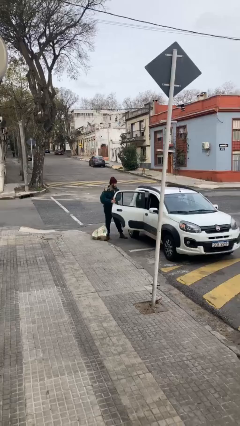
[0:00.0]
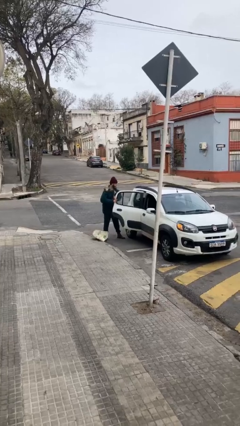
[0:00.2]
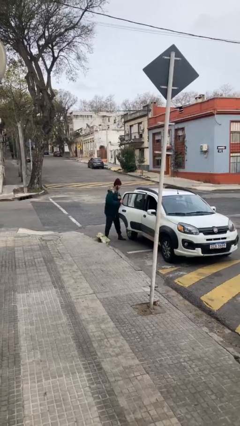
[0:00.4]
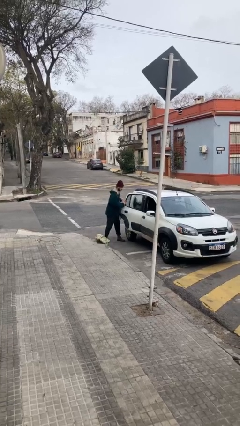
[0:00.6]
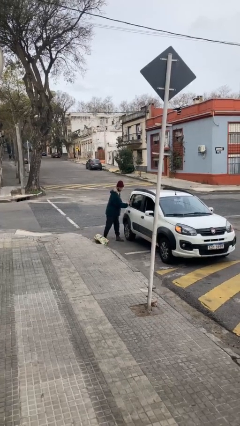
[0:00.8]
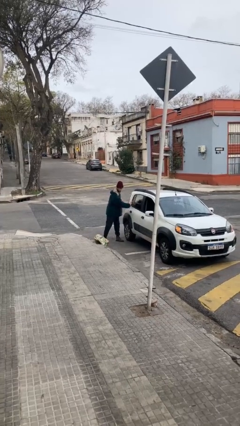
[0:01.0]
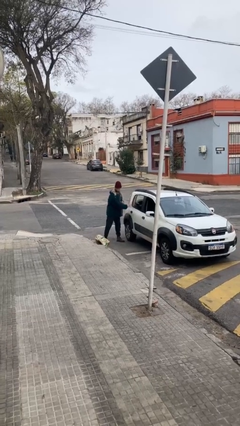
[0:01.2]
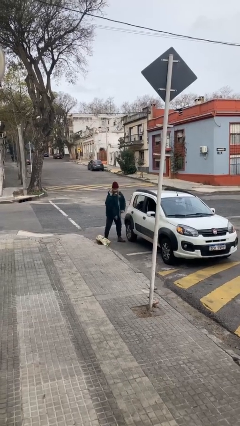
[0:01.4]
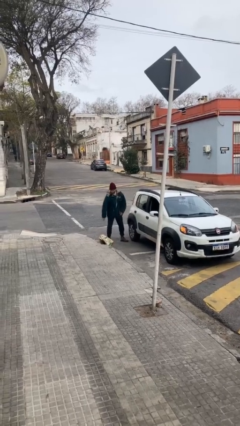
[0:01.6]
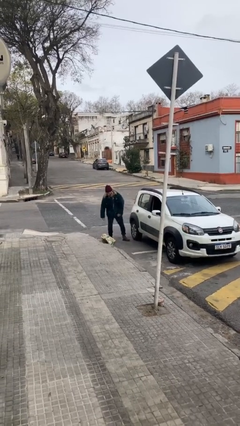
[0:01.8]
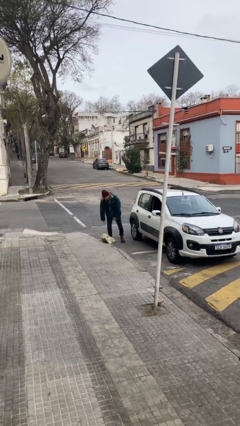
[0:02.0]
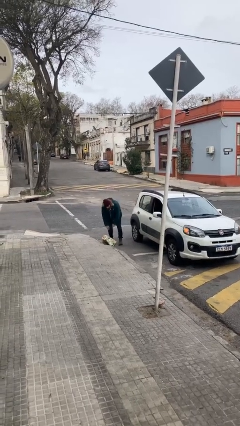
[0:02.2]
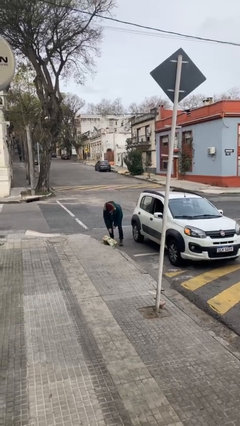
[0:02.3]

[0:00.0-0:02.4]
person closes car door

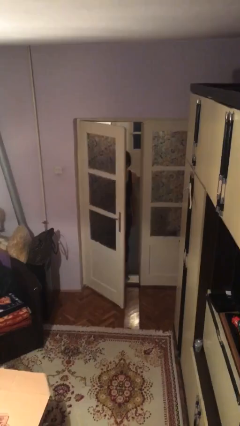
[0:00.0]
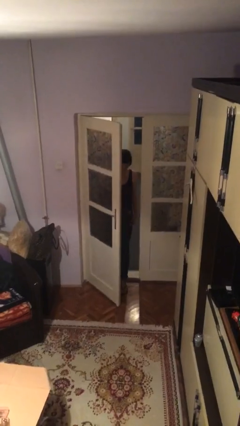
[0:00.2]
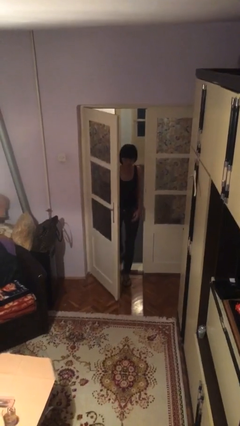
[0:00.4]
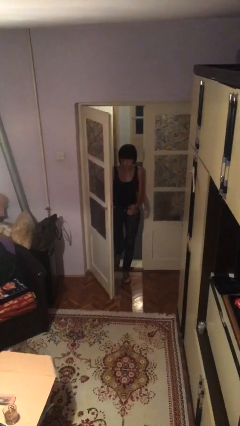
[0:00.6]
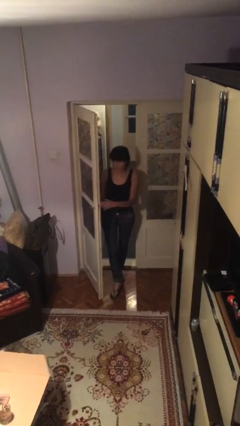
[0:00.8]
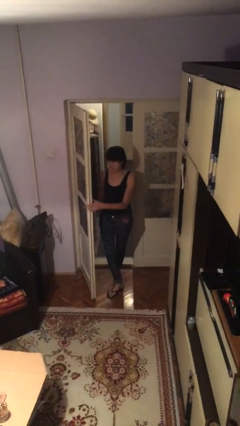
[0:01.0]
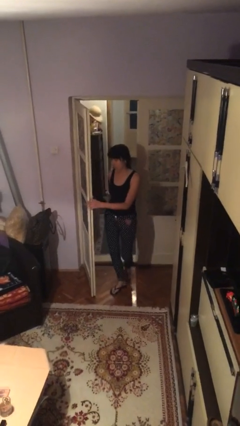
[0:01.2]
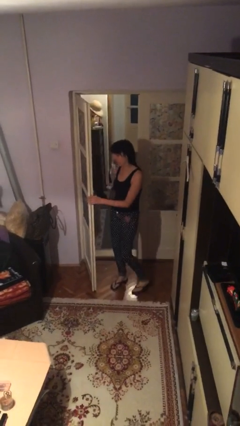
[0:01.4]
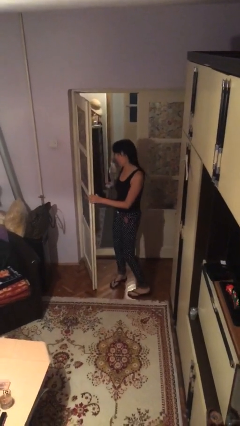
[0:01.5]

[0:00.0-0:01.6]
person enters scene through structure

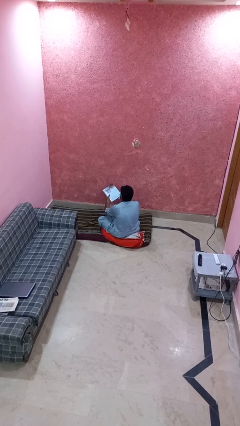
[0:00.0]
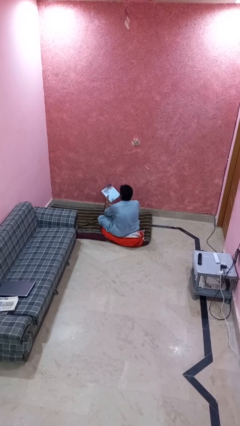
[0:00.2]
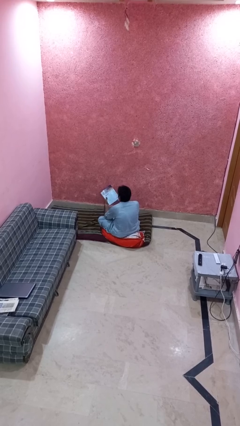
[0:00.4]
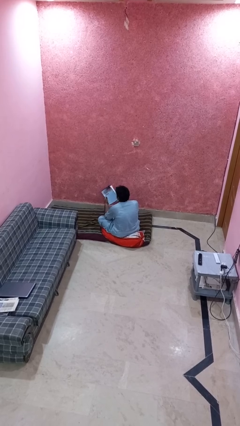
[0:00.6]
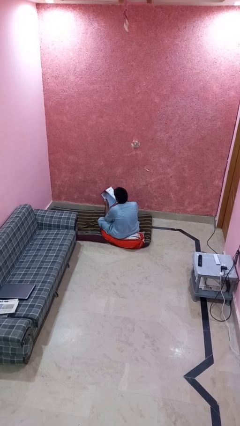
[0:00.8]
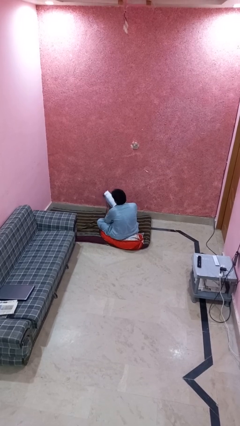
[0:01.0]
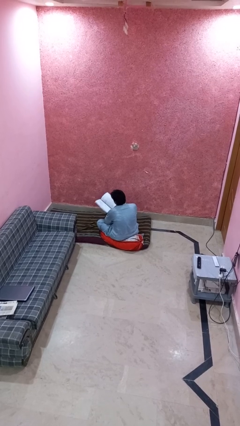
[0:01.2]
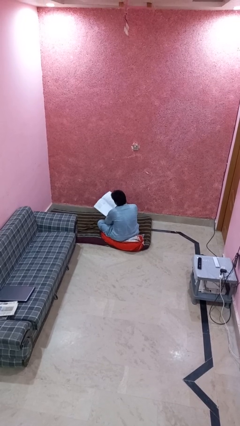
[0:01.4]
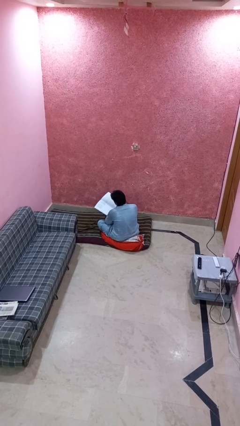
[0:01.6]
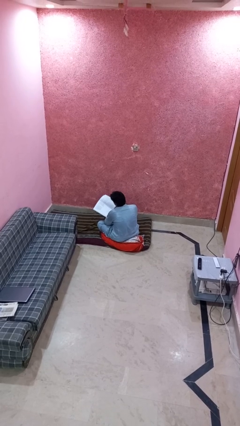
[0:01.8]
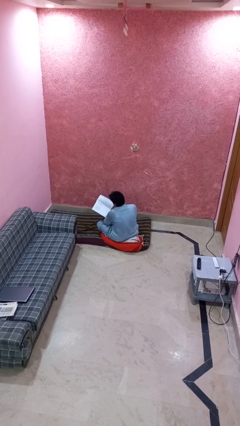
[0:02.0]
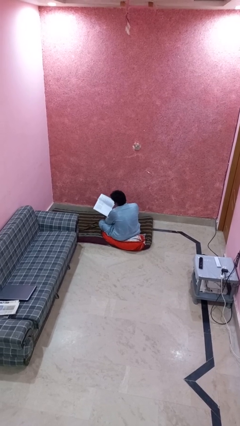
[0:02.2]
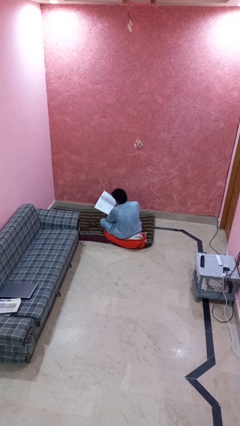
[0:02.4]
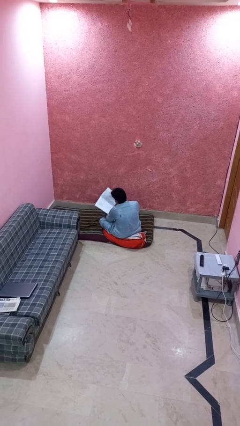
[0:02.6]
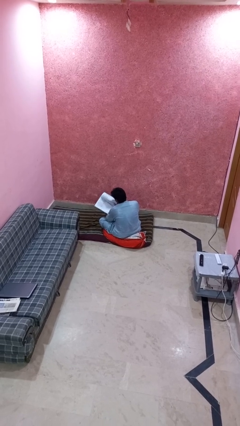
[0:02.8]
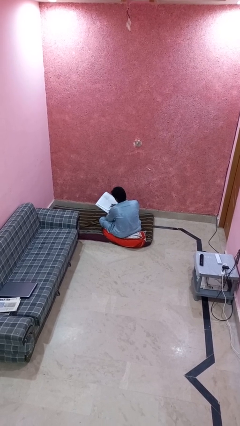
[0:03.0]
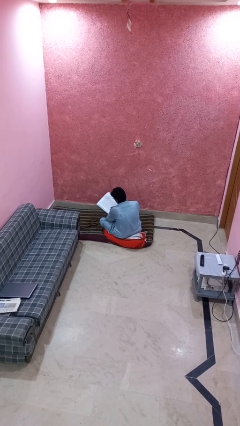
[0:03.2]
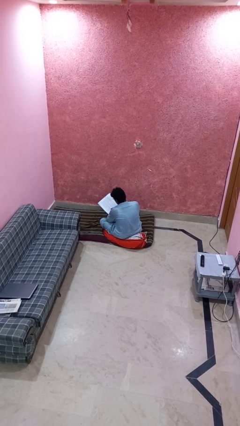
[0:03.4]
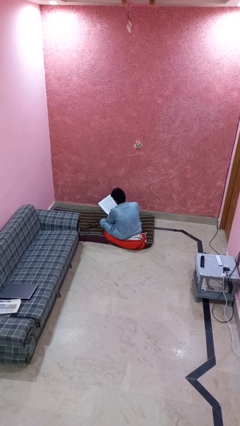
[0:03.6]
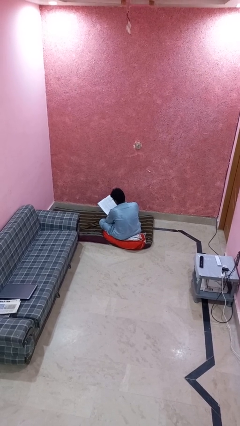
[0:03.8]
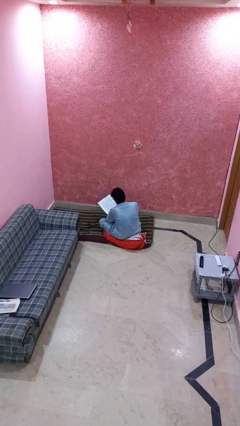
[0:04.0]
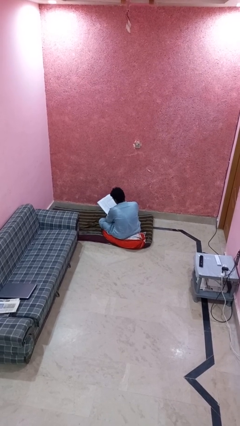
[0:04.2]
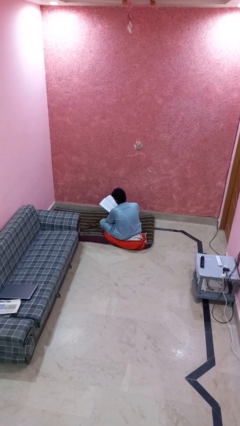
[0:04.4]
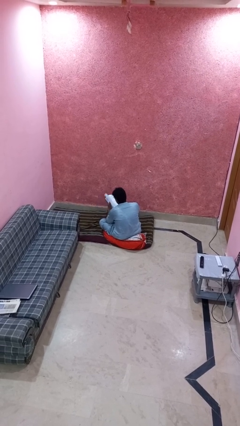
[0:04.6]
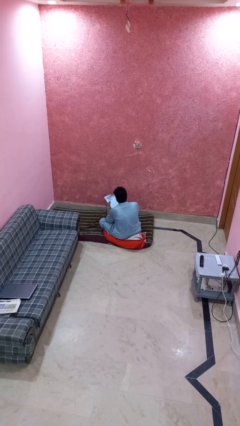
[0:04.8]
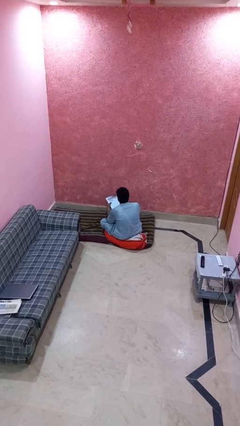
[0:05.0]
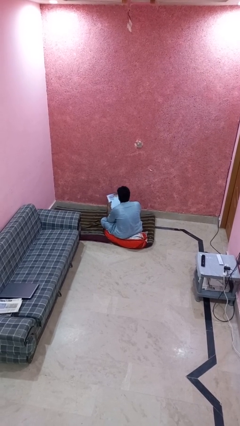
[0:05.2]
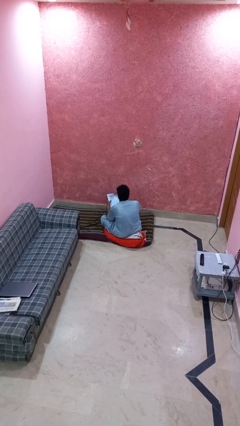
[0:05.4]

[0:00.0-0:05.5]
person reads magazine

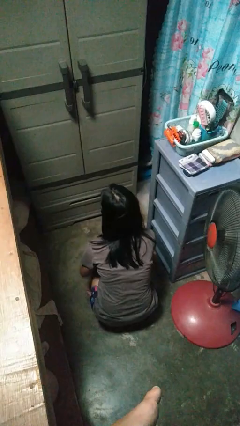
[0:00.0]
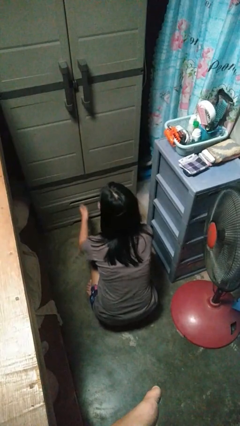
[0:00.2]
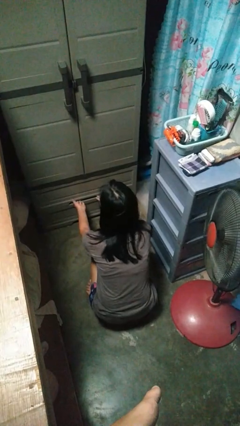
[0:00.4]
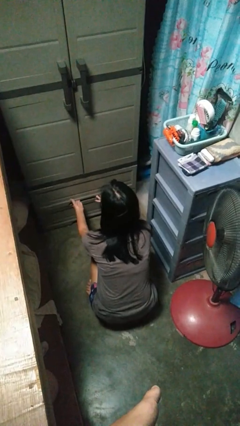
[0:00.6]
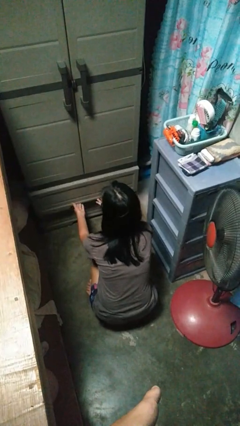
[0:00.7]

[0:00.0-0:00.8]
person opens dresser drawer

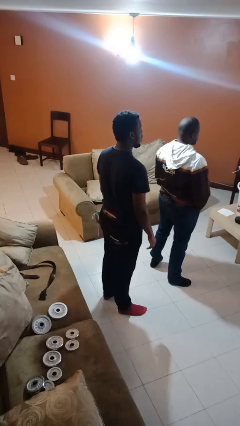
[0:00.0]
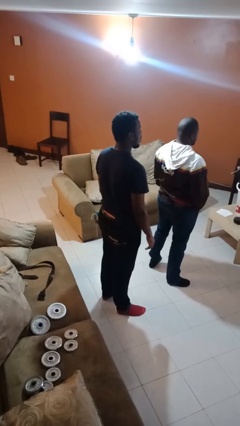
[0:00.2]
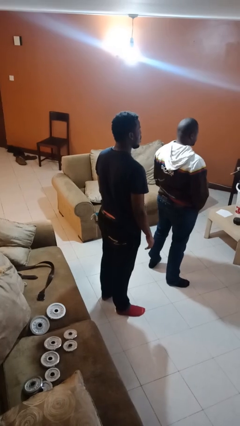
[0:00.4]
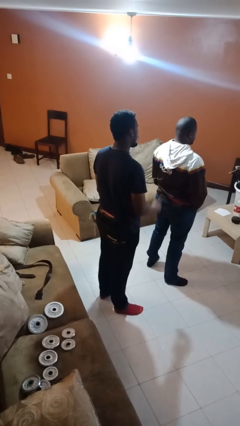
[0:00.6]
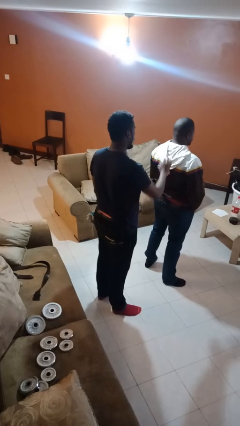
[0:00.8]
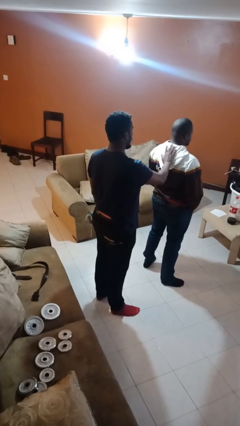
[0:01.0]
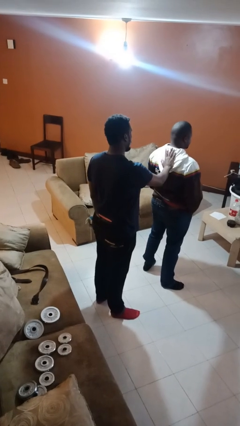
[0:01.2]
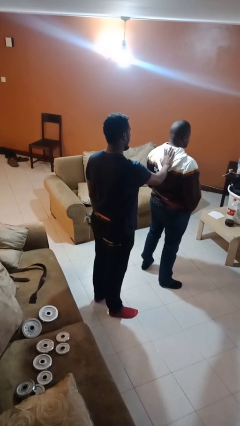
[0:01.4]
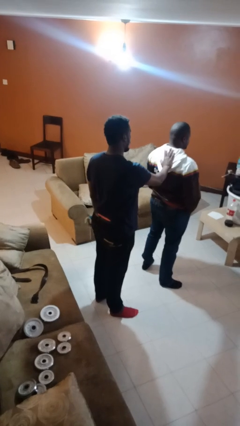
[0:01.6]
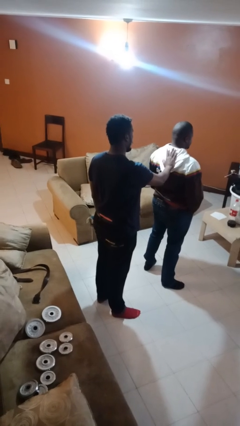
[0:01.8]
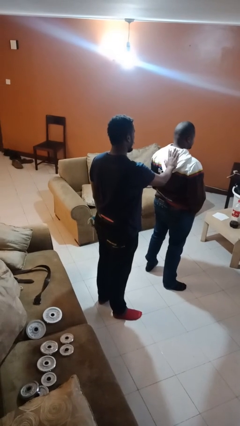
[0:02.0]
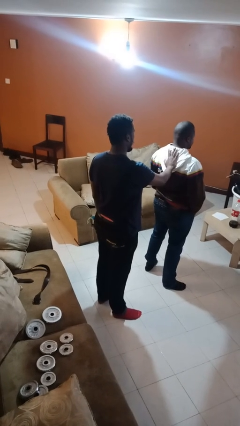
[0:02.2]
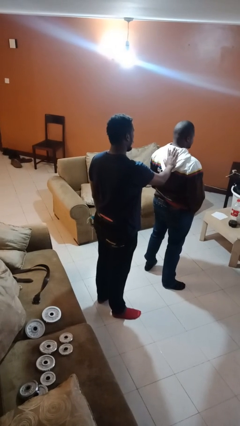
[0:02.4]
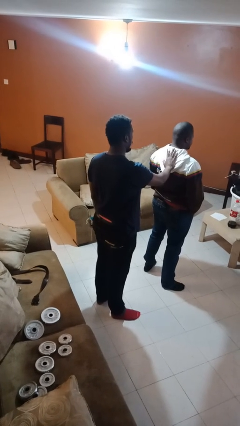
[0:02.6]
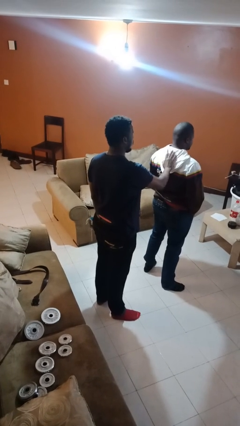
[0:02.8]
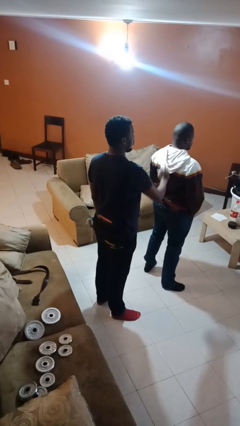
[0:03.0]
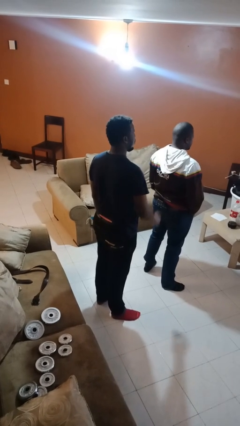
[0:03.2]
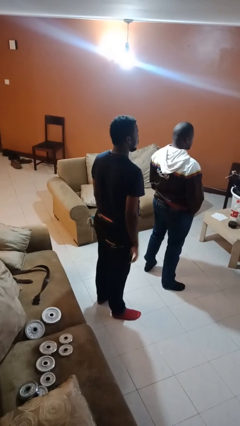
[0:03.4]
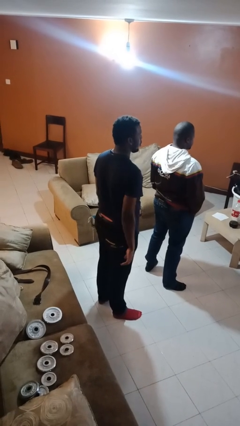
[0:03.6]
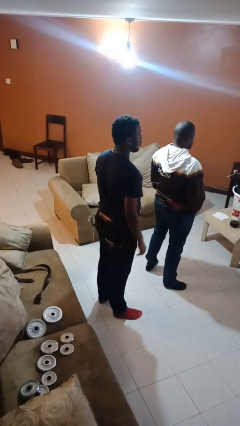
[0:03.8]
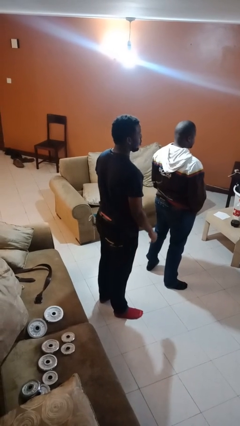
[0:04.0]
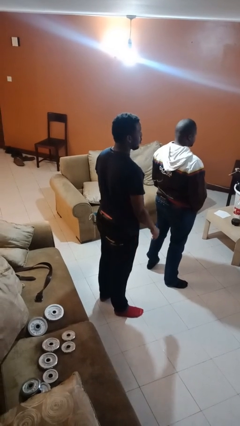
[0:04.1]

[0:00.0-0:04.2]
person touches back of person

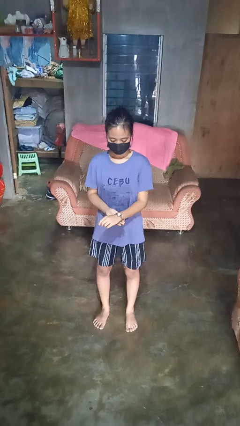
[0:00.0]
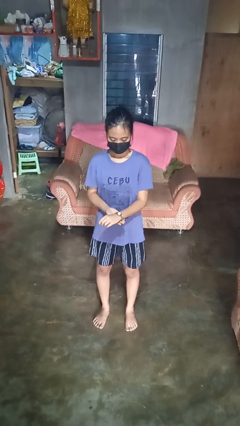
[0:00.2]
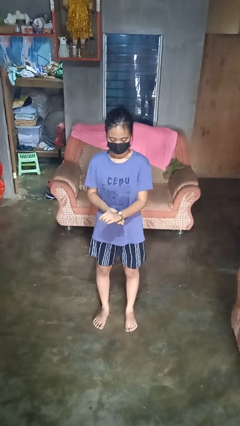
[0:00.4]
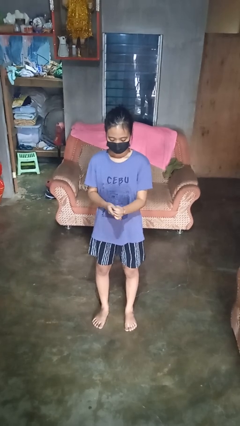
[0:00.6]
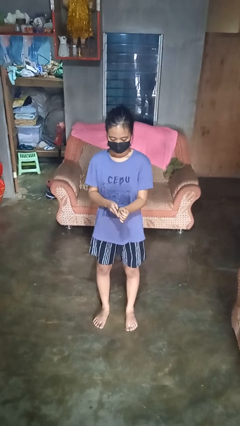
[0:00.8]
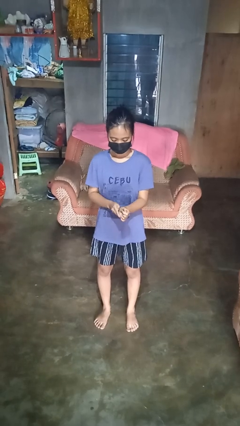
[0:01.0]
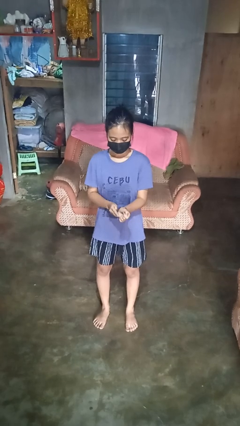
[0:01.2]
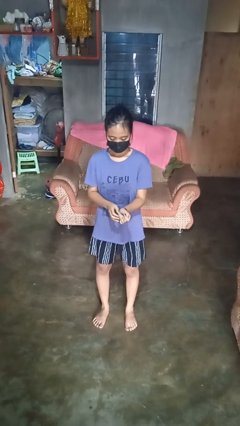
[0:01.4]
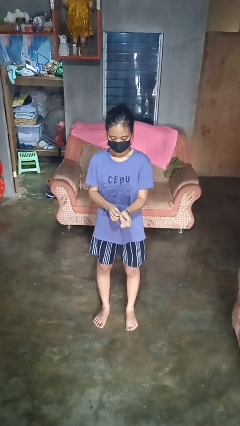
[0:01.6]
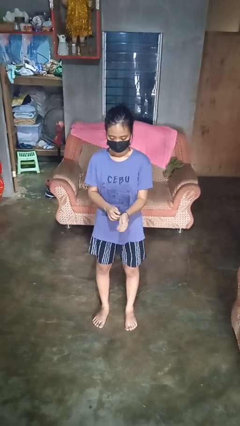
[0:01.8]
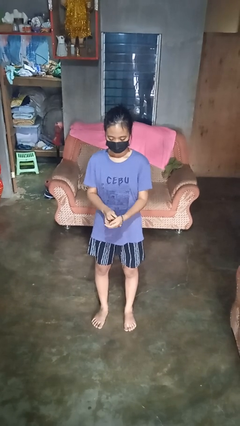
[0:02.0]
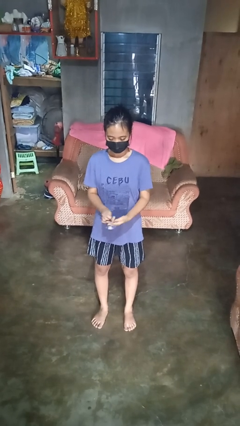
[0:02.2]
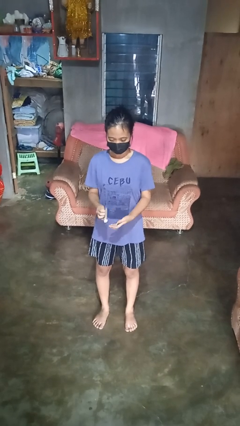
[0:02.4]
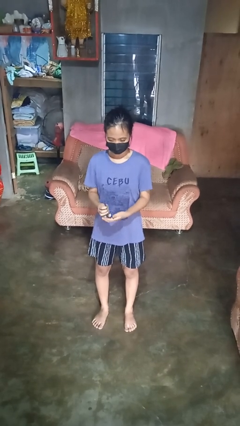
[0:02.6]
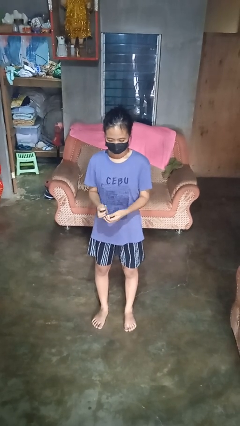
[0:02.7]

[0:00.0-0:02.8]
person takes off wristwatch

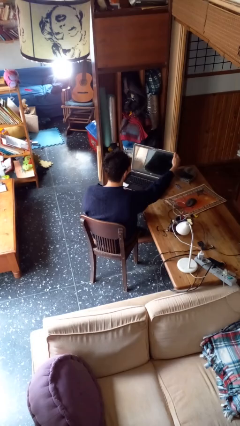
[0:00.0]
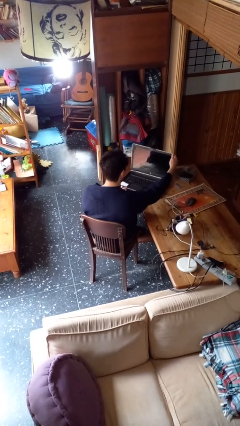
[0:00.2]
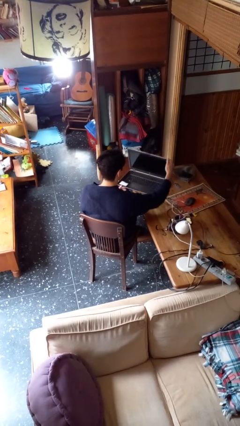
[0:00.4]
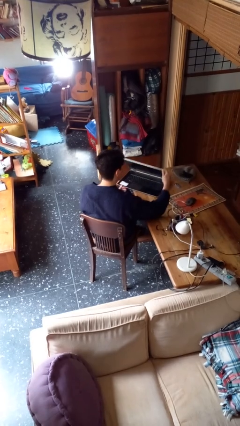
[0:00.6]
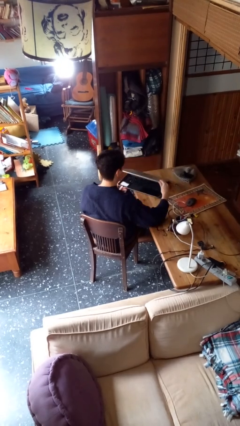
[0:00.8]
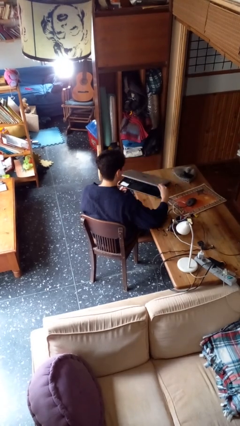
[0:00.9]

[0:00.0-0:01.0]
person closes laptop
